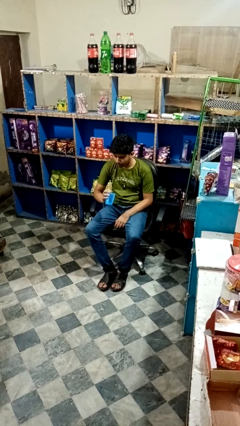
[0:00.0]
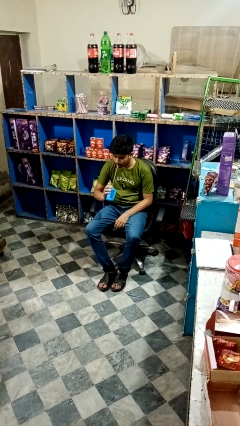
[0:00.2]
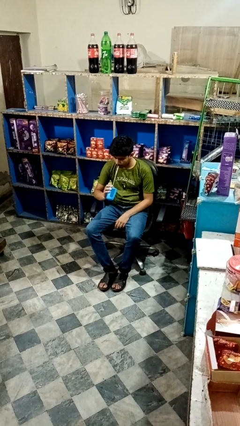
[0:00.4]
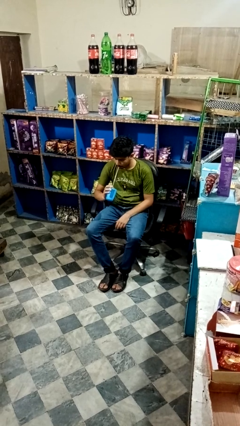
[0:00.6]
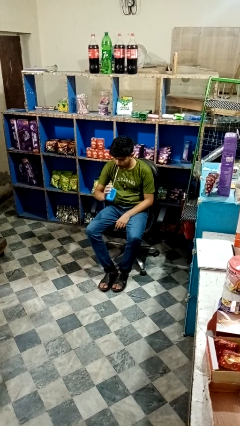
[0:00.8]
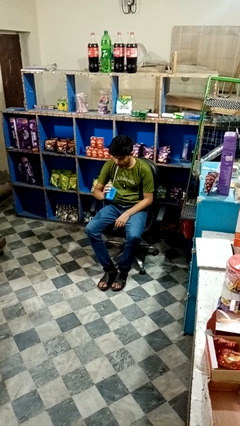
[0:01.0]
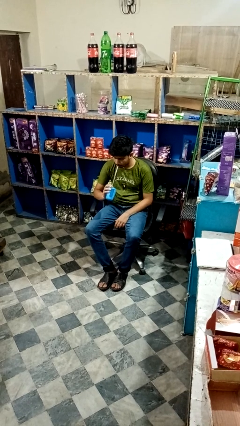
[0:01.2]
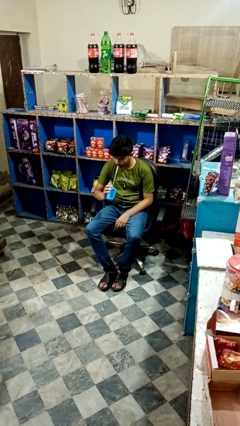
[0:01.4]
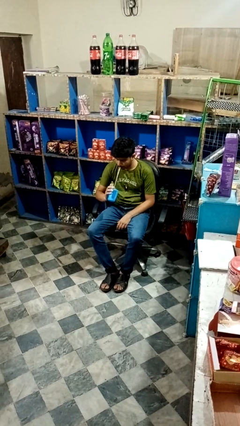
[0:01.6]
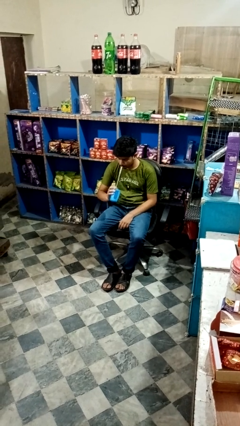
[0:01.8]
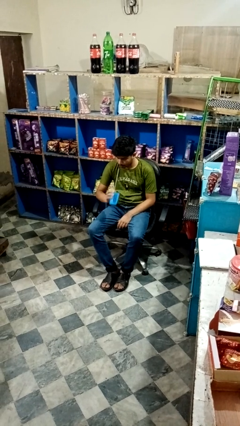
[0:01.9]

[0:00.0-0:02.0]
person drinks from straw

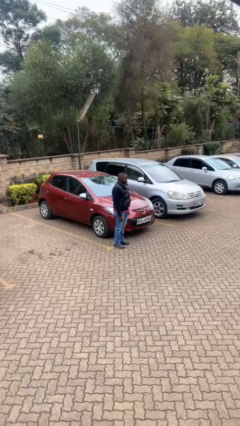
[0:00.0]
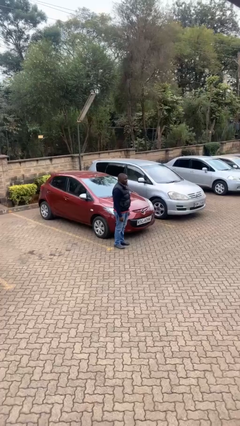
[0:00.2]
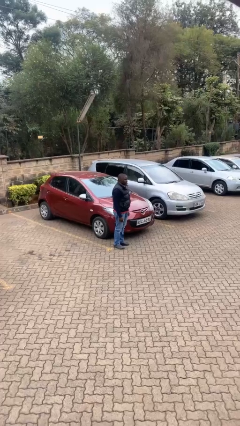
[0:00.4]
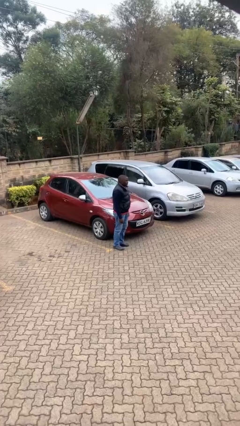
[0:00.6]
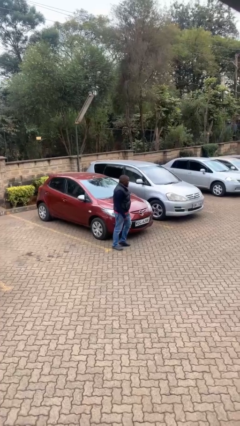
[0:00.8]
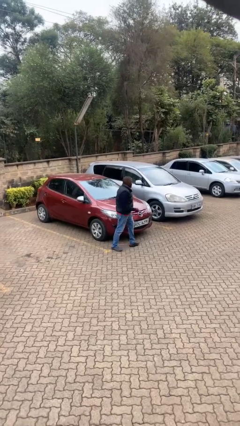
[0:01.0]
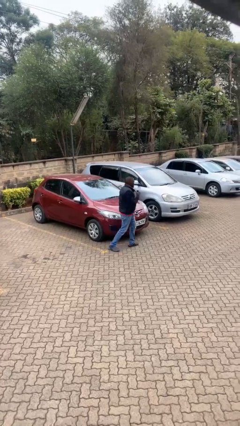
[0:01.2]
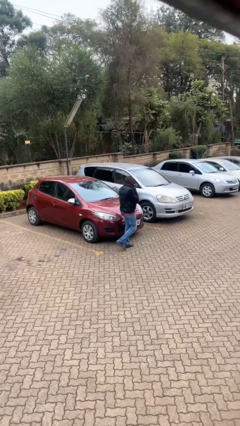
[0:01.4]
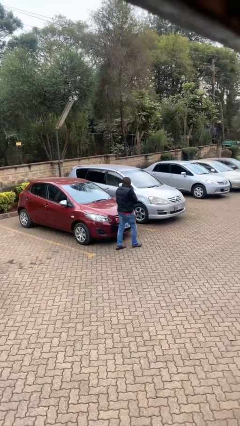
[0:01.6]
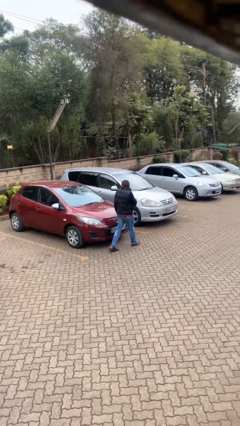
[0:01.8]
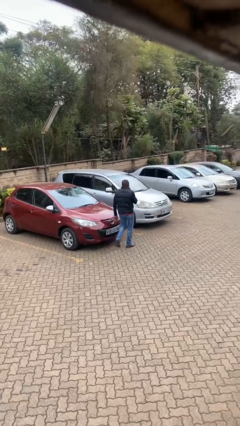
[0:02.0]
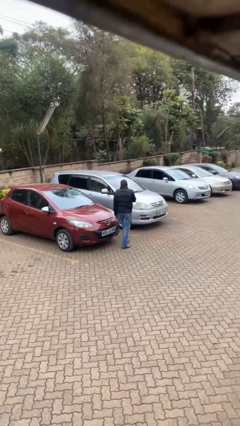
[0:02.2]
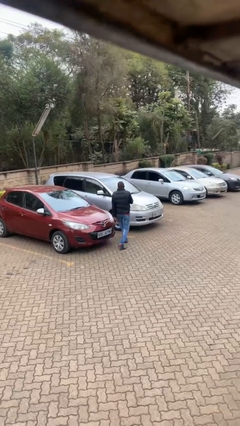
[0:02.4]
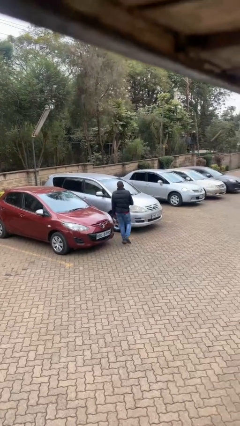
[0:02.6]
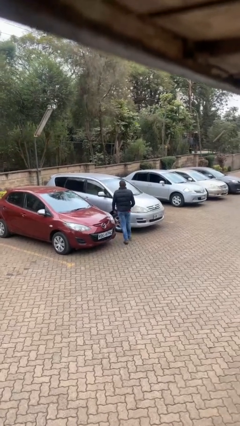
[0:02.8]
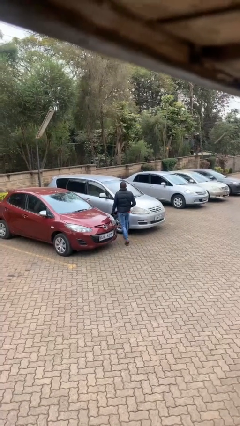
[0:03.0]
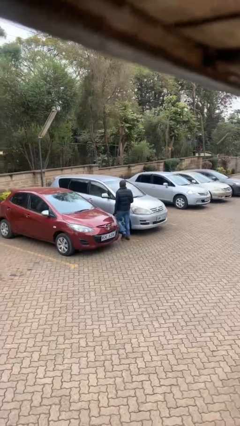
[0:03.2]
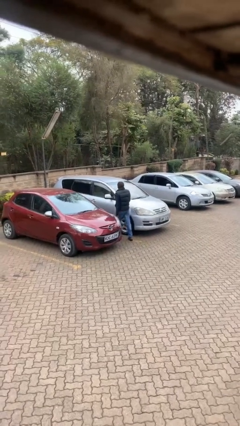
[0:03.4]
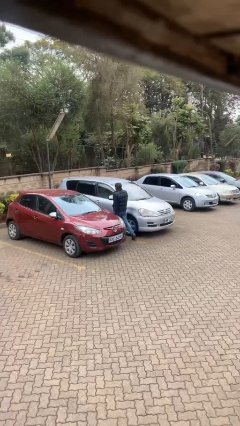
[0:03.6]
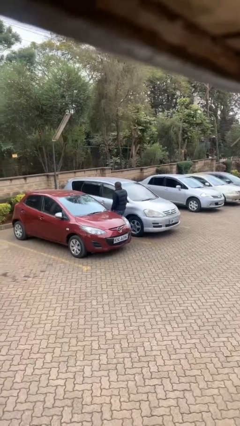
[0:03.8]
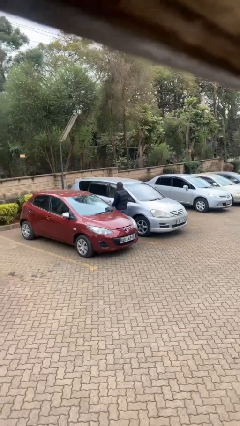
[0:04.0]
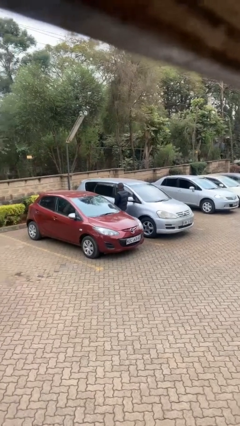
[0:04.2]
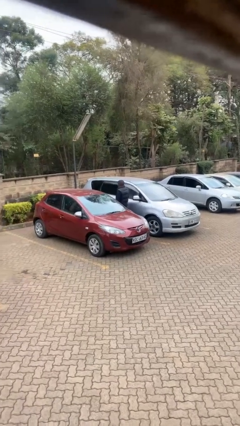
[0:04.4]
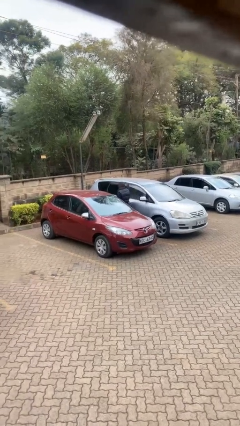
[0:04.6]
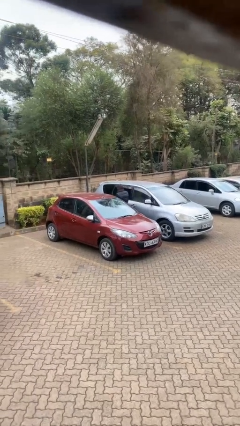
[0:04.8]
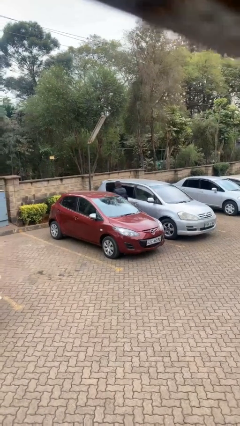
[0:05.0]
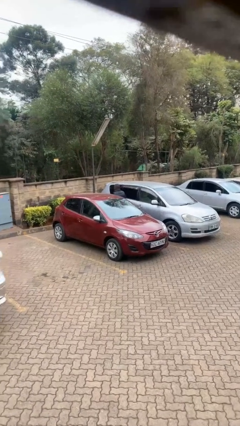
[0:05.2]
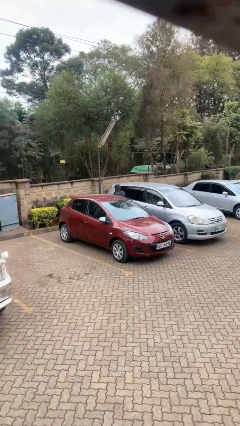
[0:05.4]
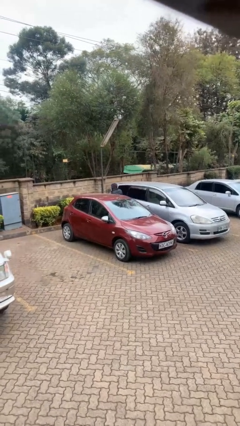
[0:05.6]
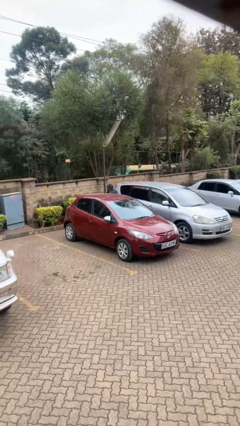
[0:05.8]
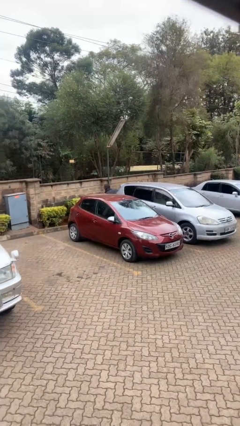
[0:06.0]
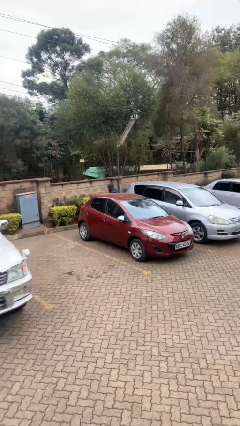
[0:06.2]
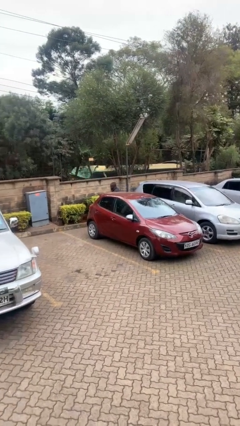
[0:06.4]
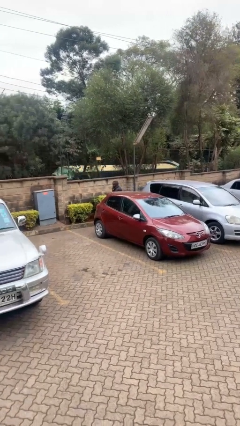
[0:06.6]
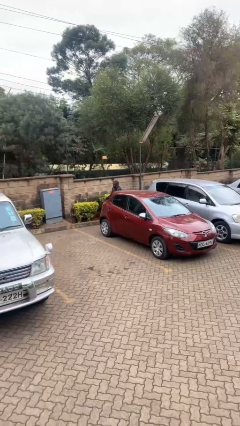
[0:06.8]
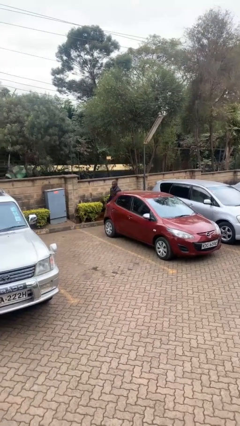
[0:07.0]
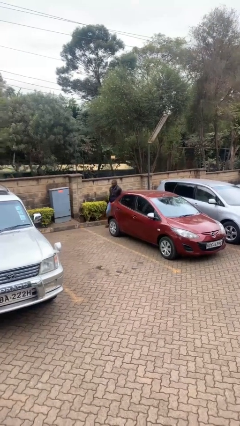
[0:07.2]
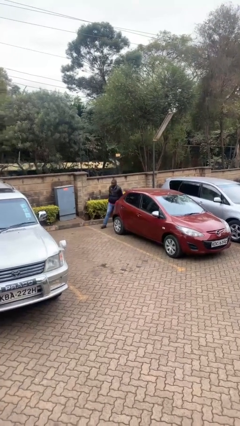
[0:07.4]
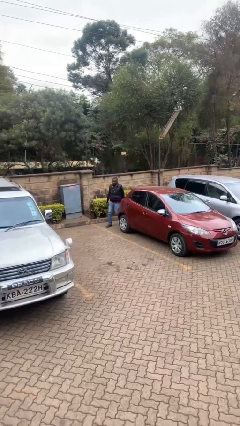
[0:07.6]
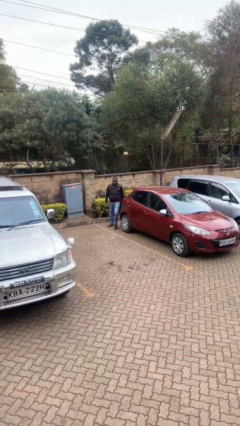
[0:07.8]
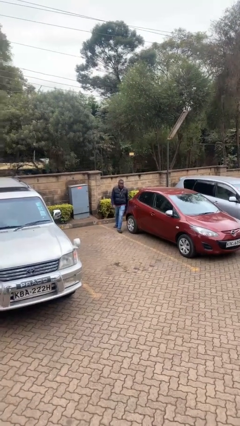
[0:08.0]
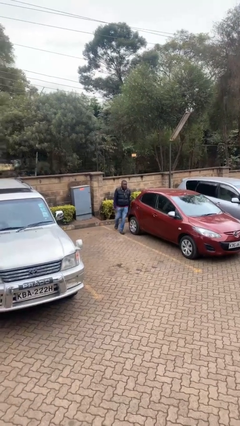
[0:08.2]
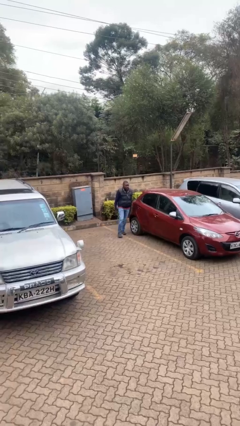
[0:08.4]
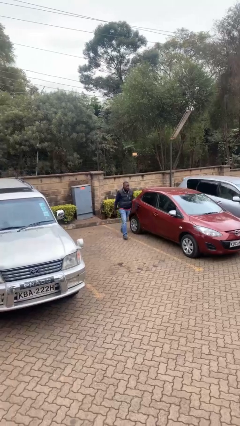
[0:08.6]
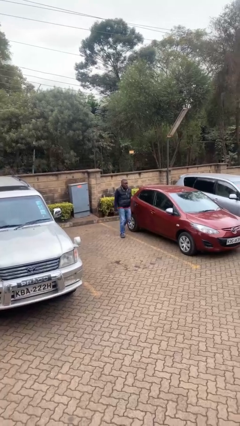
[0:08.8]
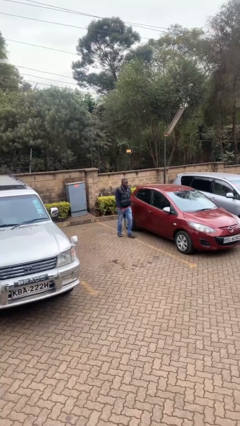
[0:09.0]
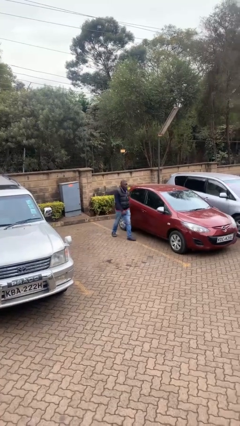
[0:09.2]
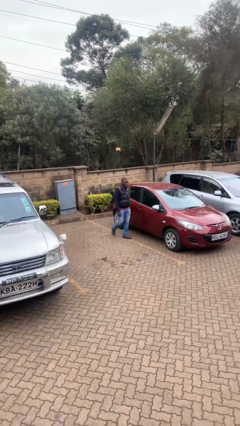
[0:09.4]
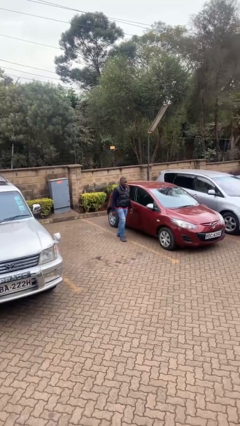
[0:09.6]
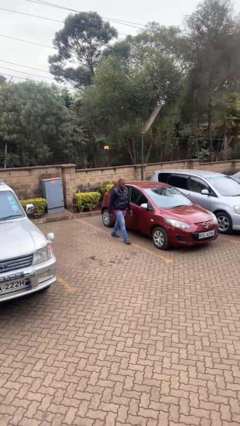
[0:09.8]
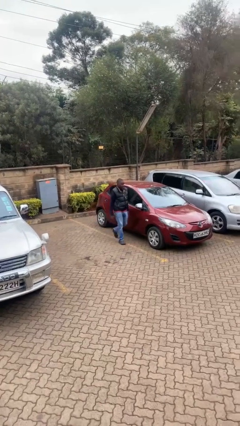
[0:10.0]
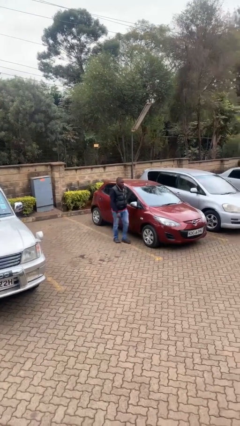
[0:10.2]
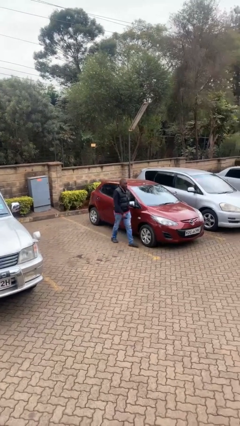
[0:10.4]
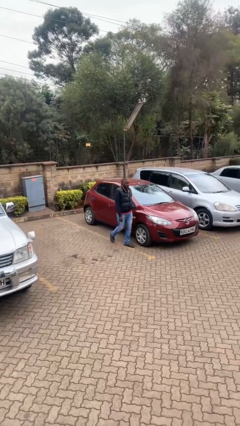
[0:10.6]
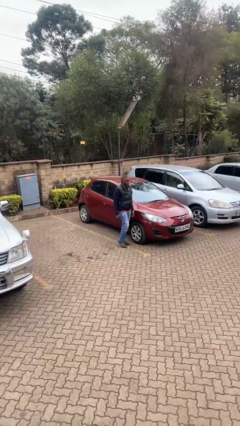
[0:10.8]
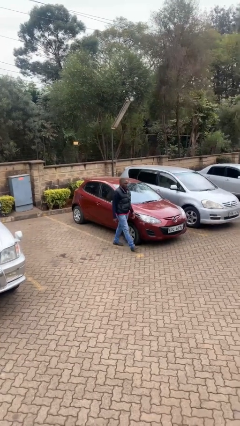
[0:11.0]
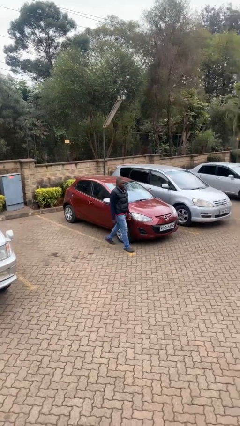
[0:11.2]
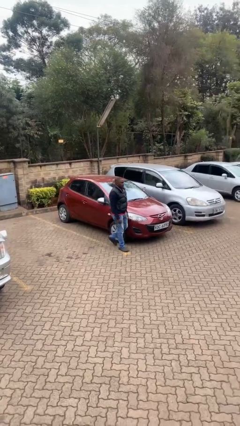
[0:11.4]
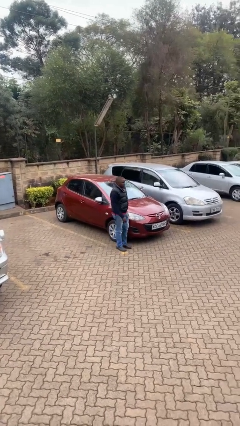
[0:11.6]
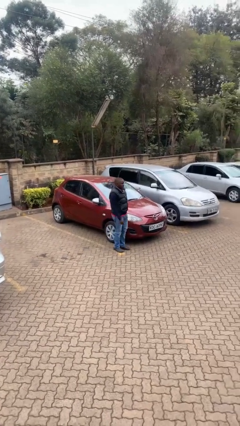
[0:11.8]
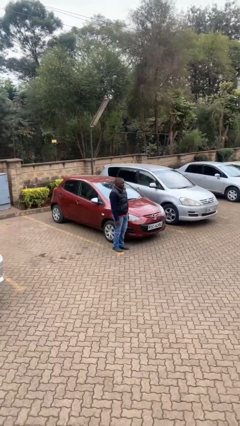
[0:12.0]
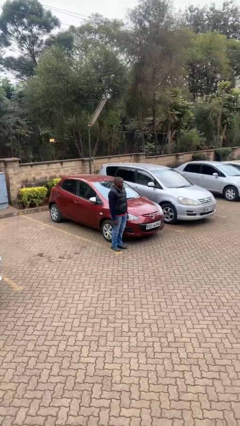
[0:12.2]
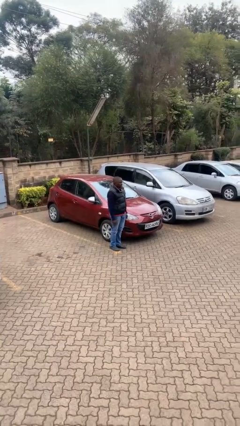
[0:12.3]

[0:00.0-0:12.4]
person walks around car

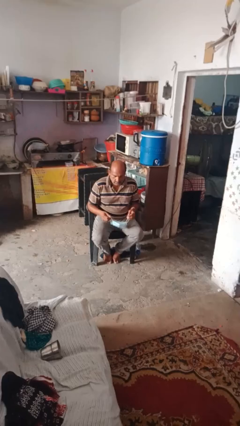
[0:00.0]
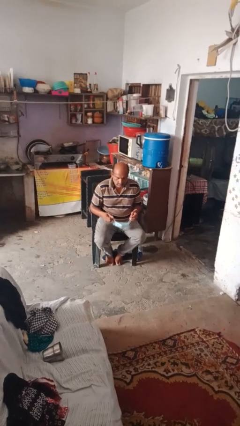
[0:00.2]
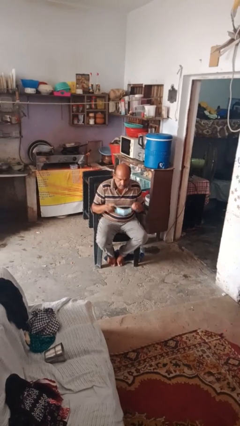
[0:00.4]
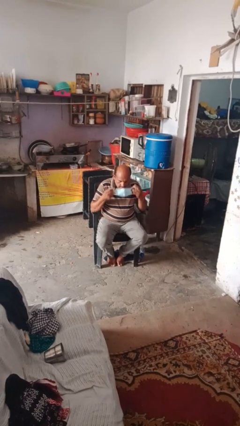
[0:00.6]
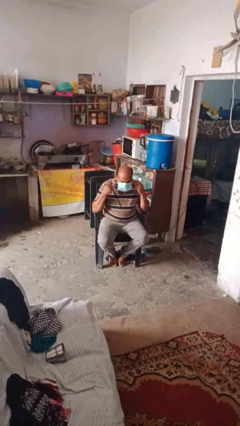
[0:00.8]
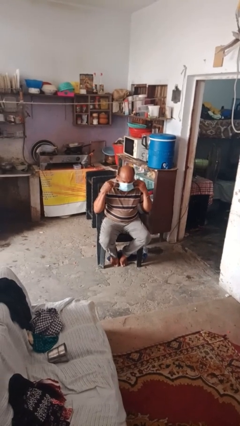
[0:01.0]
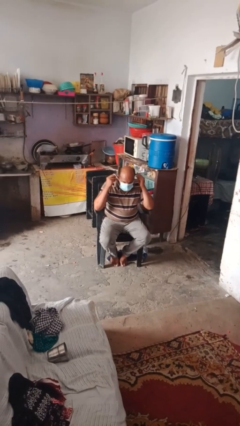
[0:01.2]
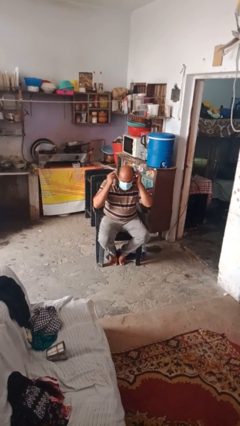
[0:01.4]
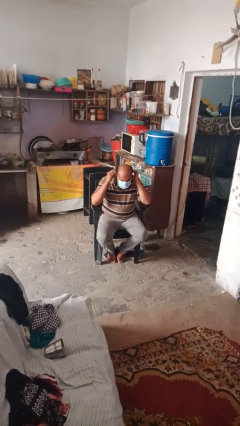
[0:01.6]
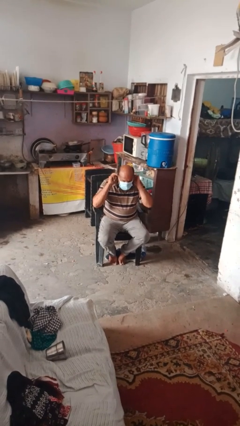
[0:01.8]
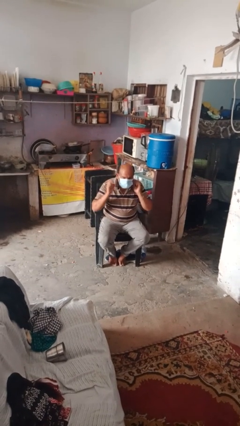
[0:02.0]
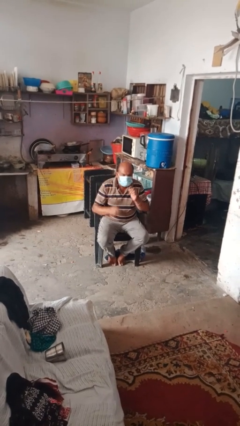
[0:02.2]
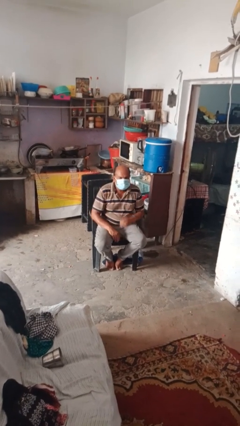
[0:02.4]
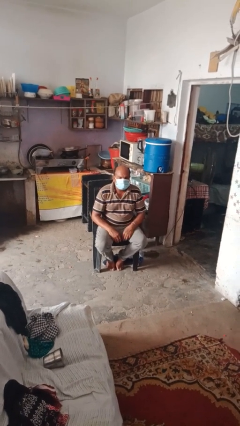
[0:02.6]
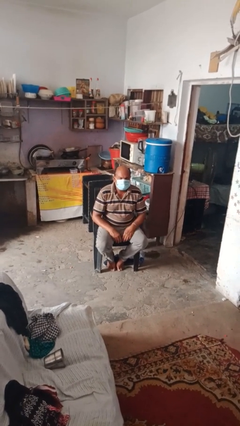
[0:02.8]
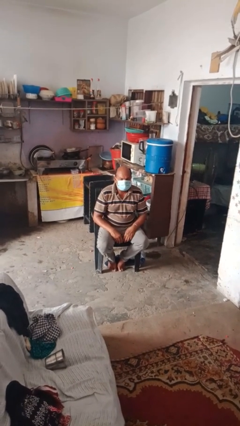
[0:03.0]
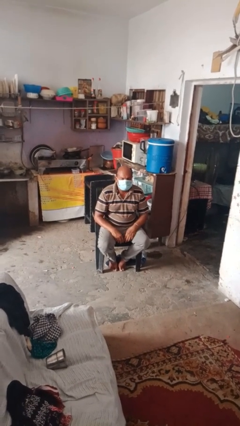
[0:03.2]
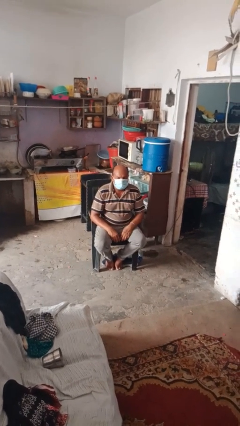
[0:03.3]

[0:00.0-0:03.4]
person puts on facemask
